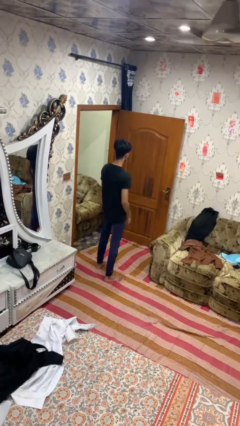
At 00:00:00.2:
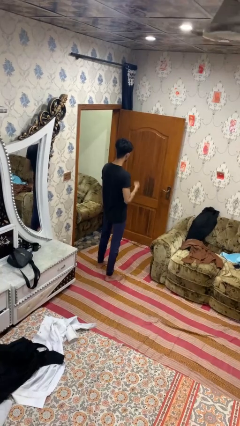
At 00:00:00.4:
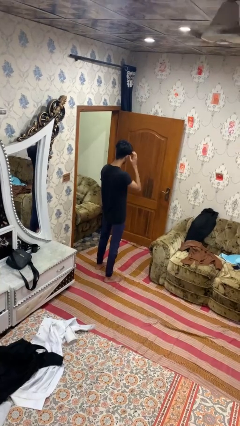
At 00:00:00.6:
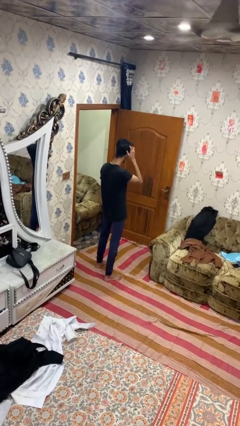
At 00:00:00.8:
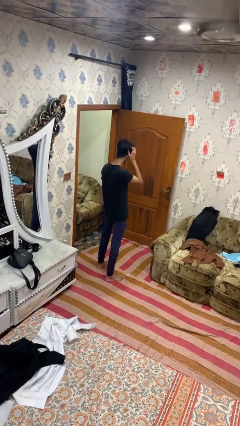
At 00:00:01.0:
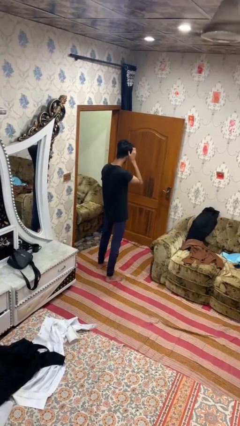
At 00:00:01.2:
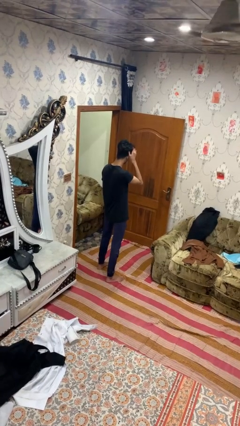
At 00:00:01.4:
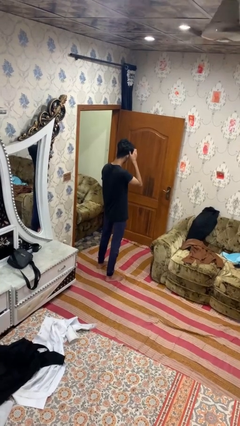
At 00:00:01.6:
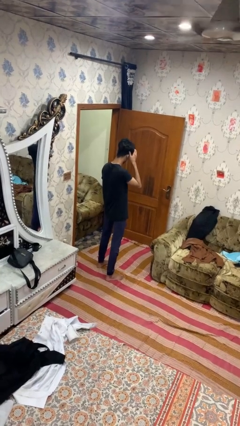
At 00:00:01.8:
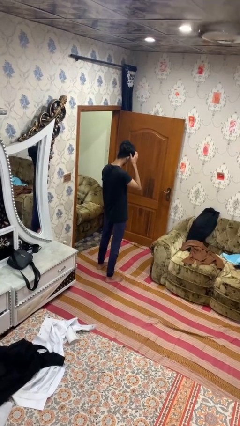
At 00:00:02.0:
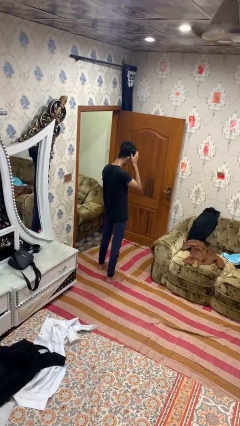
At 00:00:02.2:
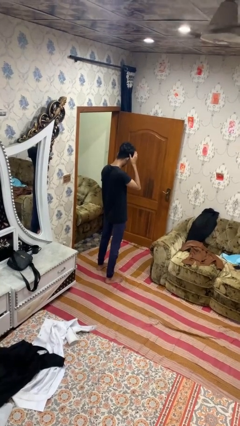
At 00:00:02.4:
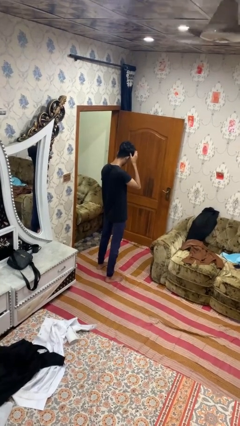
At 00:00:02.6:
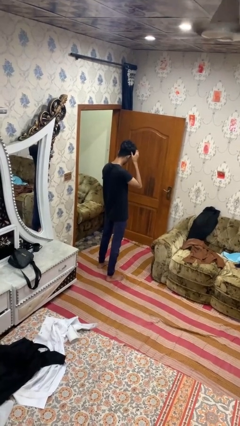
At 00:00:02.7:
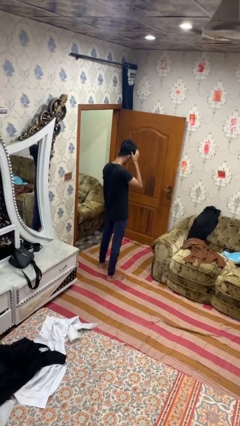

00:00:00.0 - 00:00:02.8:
person strokes hair

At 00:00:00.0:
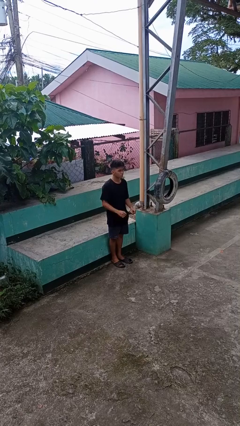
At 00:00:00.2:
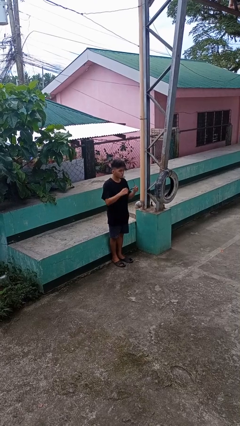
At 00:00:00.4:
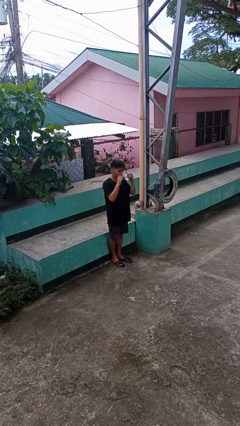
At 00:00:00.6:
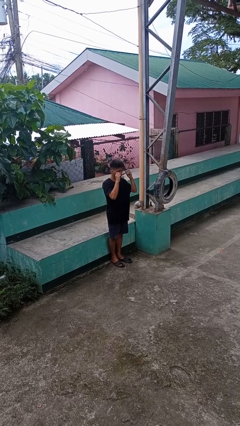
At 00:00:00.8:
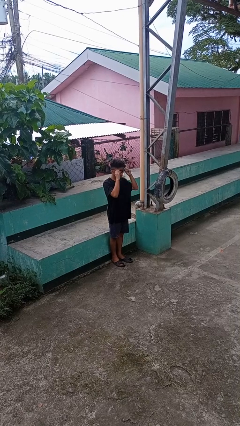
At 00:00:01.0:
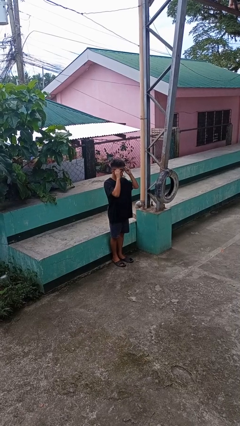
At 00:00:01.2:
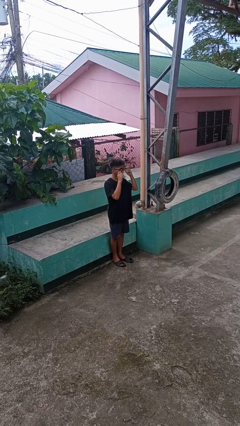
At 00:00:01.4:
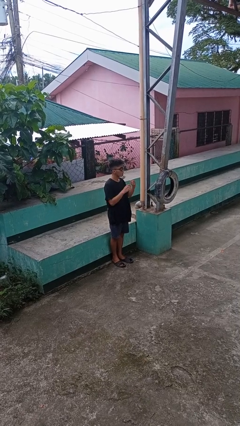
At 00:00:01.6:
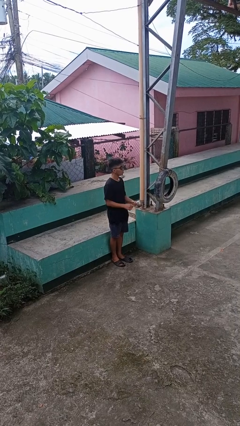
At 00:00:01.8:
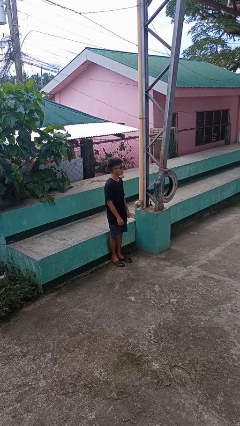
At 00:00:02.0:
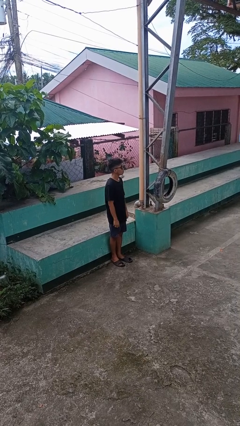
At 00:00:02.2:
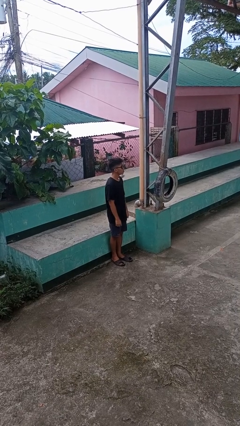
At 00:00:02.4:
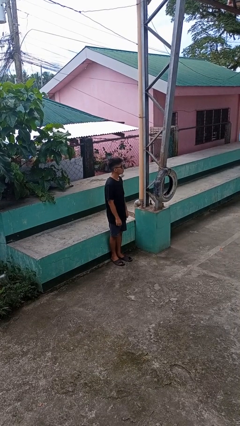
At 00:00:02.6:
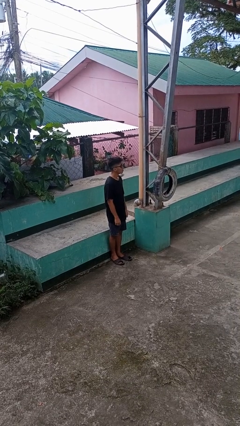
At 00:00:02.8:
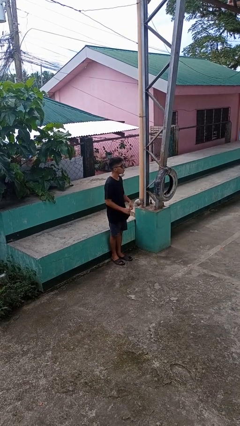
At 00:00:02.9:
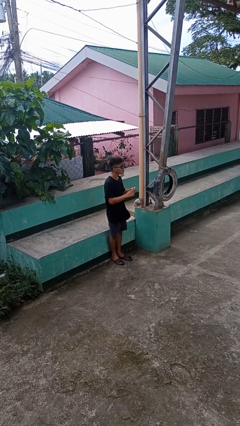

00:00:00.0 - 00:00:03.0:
person puts on sunglasses

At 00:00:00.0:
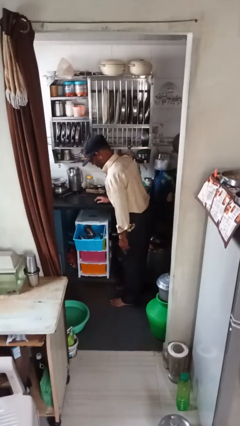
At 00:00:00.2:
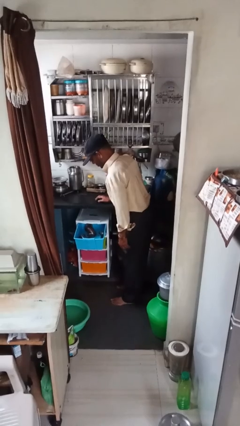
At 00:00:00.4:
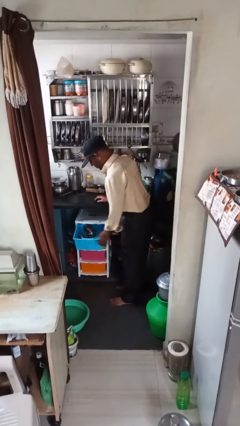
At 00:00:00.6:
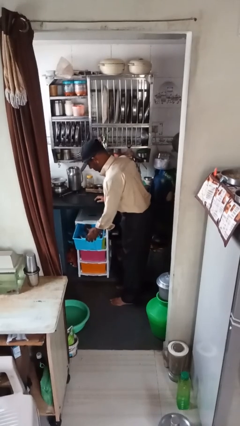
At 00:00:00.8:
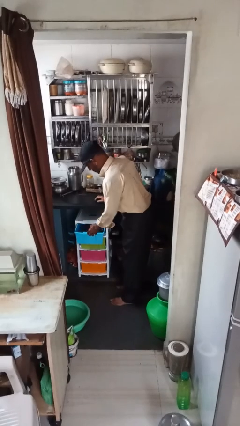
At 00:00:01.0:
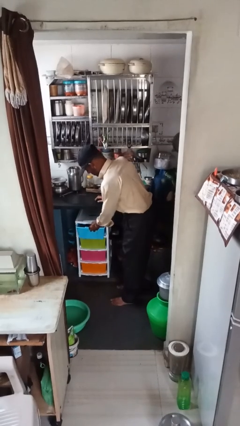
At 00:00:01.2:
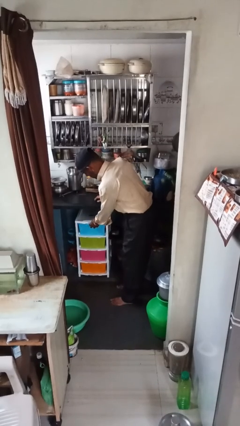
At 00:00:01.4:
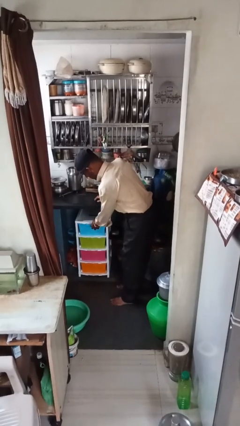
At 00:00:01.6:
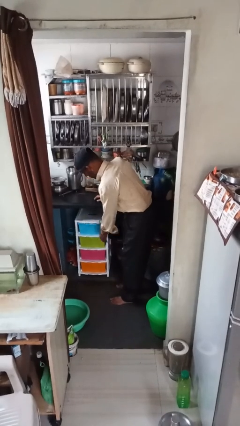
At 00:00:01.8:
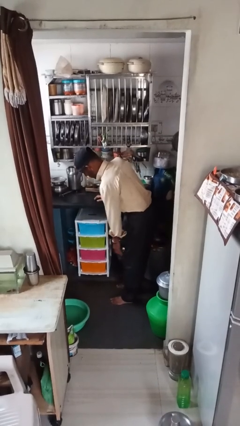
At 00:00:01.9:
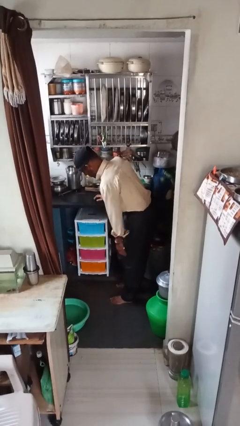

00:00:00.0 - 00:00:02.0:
person closes kitchen drawer

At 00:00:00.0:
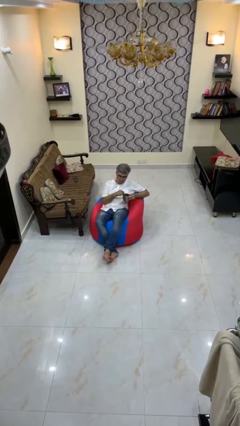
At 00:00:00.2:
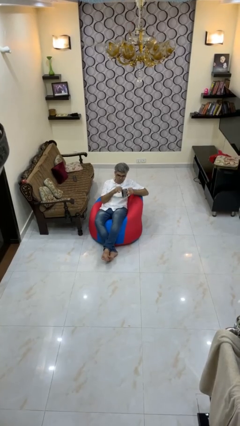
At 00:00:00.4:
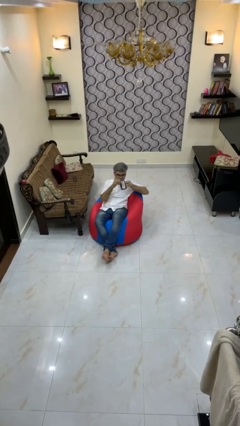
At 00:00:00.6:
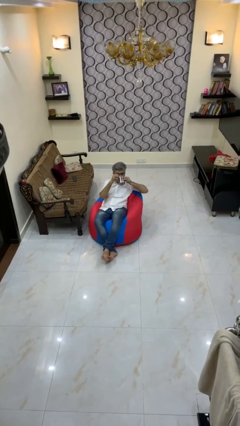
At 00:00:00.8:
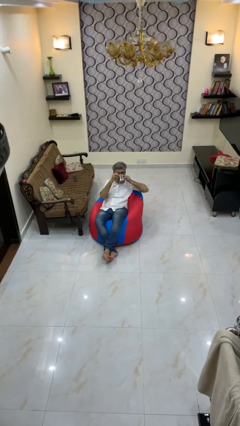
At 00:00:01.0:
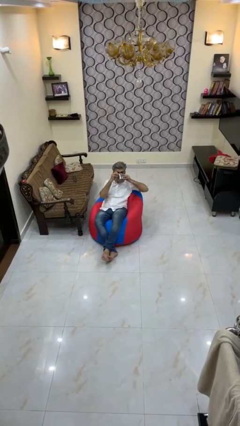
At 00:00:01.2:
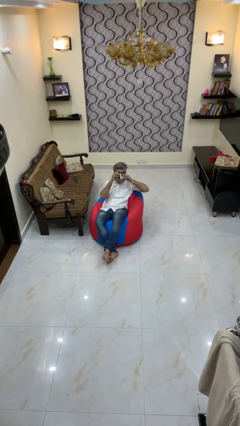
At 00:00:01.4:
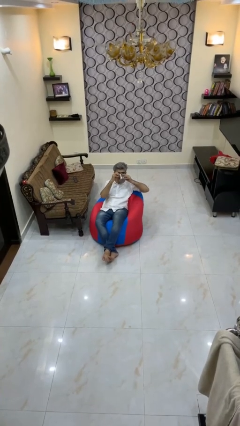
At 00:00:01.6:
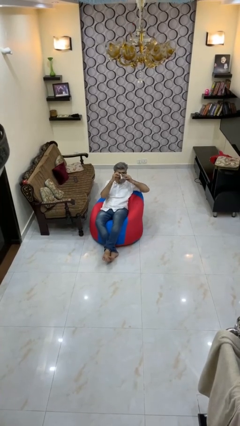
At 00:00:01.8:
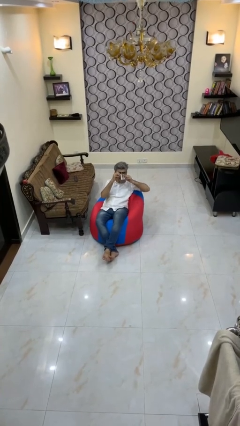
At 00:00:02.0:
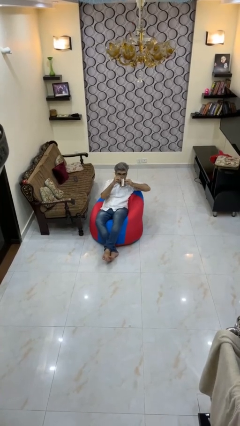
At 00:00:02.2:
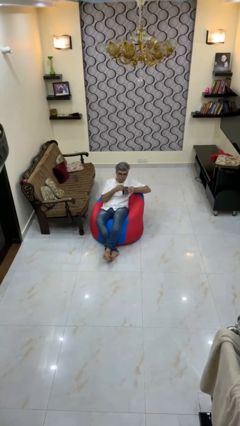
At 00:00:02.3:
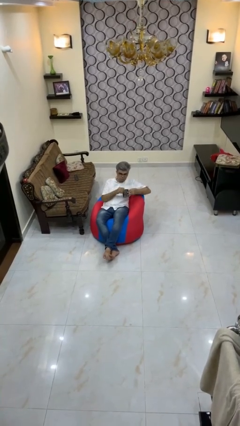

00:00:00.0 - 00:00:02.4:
person drinks from mug

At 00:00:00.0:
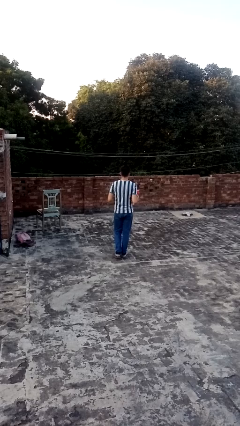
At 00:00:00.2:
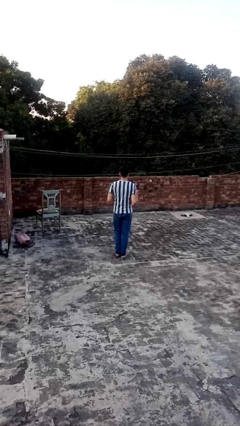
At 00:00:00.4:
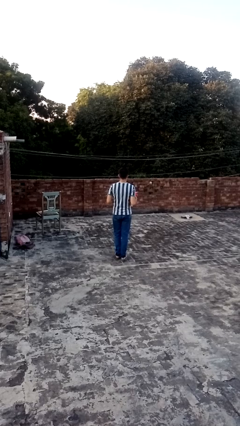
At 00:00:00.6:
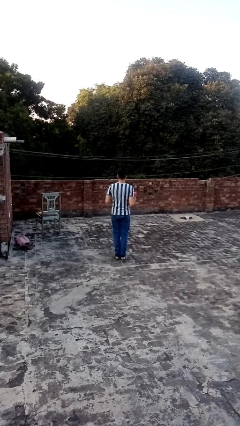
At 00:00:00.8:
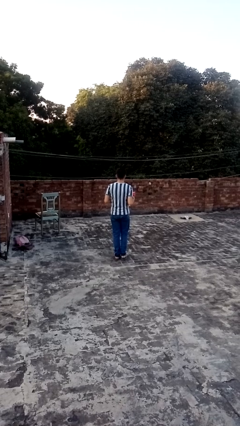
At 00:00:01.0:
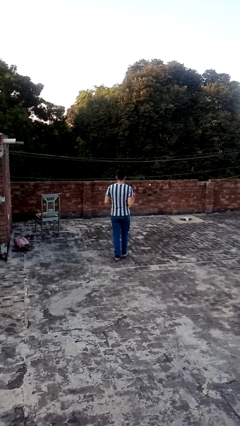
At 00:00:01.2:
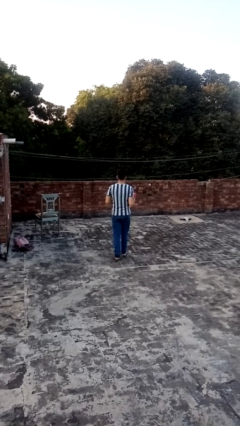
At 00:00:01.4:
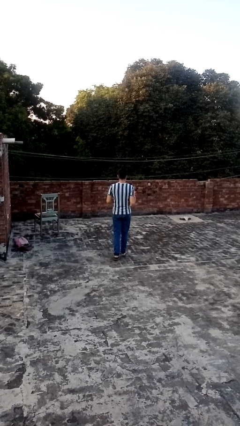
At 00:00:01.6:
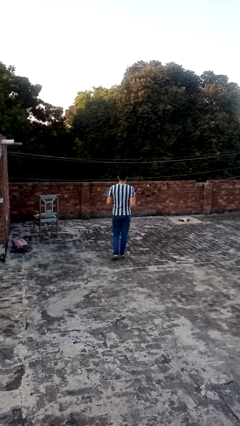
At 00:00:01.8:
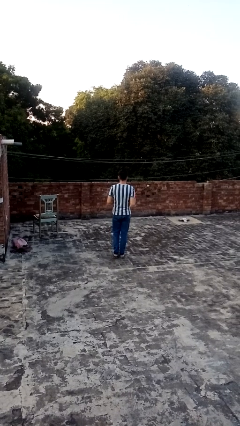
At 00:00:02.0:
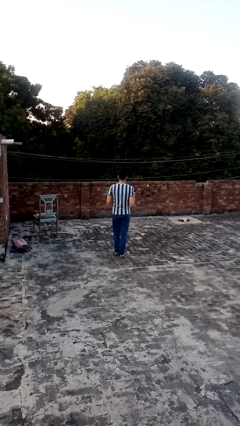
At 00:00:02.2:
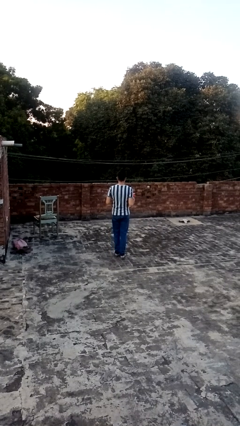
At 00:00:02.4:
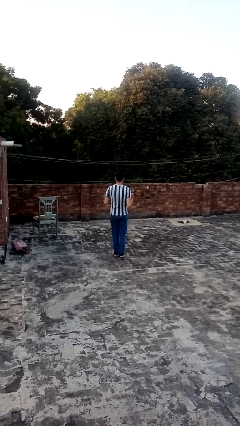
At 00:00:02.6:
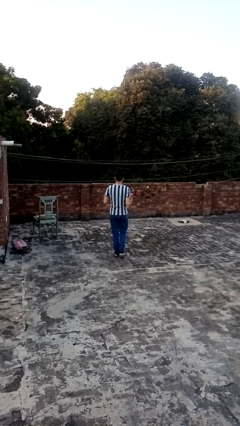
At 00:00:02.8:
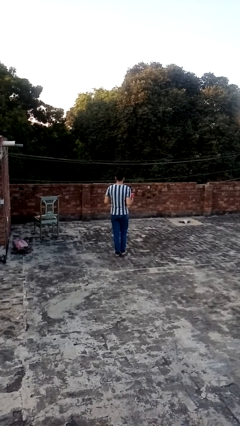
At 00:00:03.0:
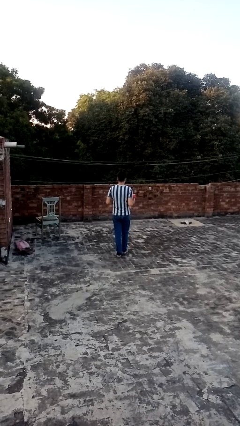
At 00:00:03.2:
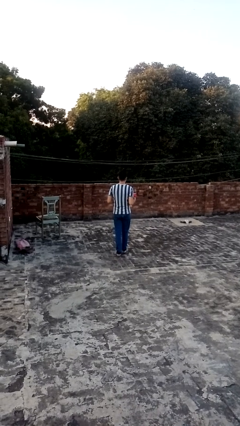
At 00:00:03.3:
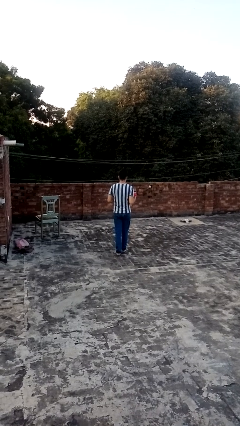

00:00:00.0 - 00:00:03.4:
person carries laundry basket

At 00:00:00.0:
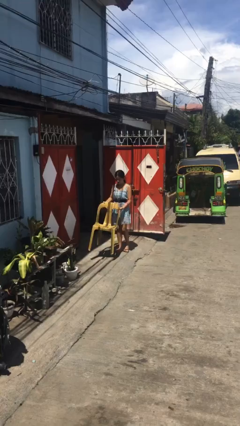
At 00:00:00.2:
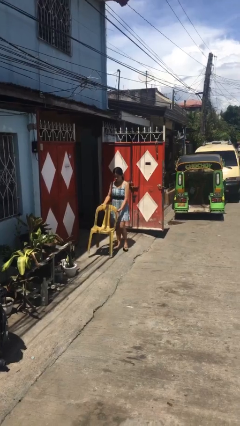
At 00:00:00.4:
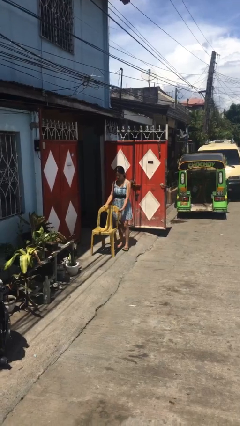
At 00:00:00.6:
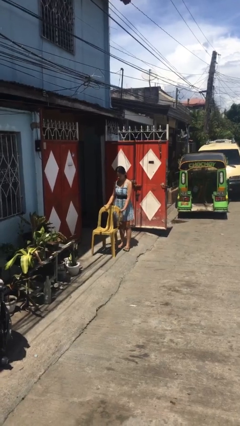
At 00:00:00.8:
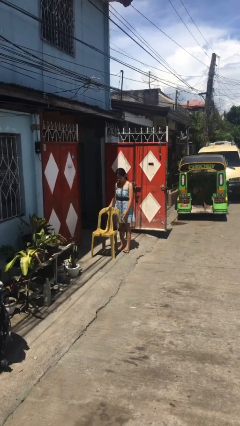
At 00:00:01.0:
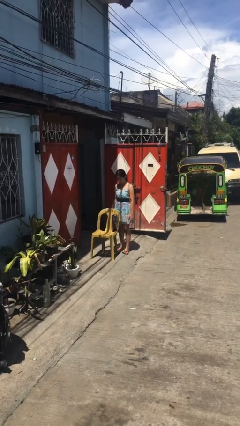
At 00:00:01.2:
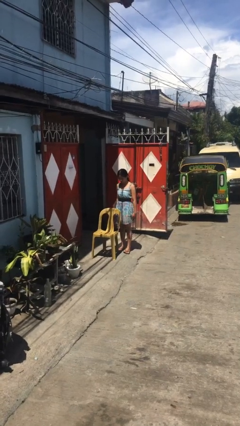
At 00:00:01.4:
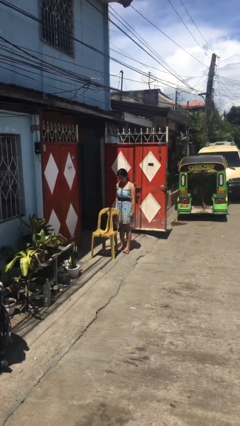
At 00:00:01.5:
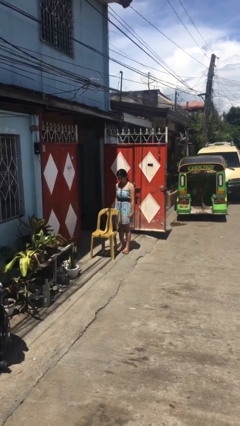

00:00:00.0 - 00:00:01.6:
person puts down object on floor

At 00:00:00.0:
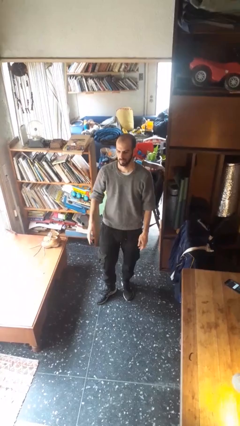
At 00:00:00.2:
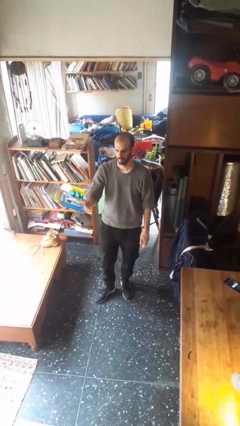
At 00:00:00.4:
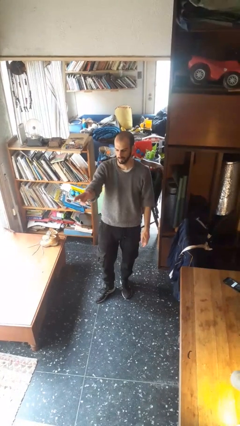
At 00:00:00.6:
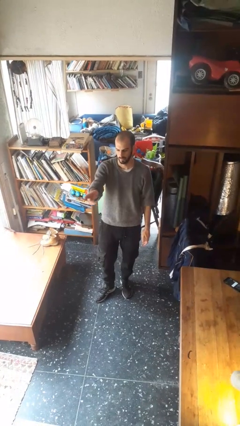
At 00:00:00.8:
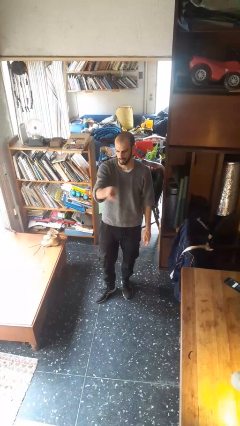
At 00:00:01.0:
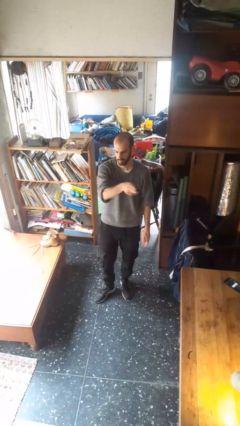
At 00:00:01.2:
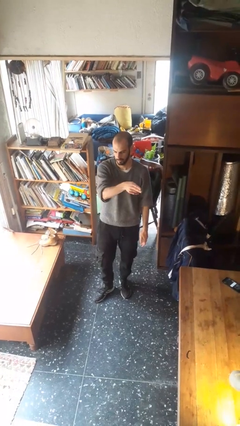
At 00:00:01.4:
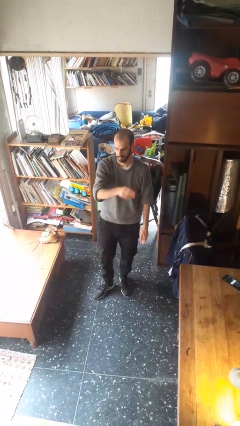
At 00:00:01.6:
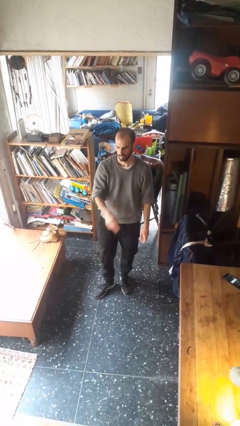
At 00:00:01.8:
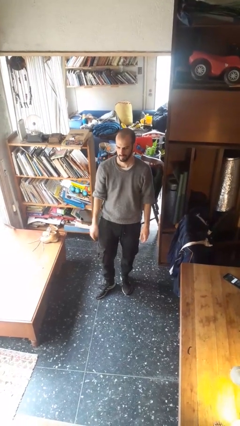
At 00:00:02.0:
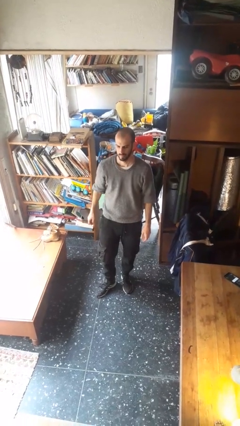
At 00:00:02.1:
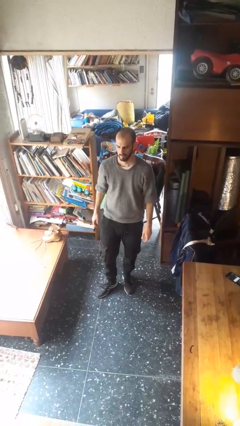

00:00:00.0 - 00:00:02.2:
person gestures swipe left
